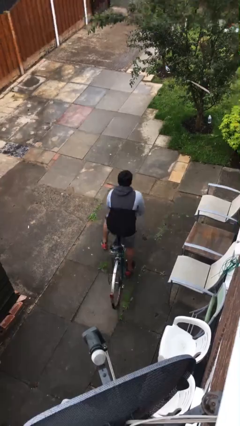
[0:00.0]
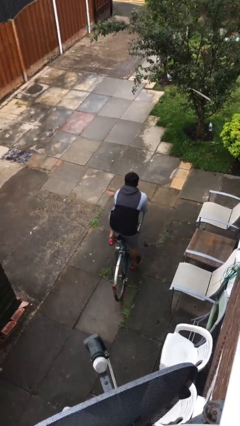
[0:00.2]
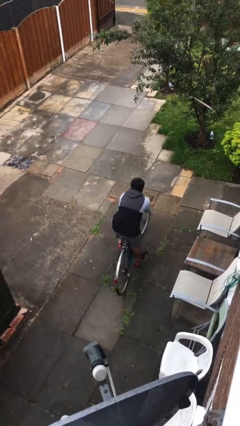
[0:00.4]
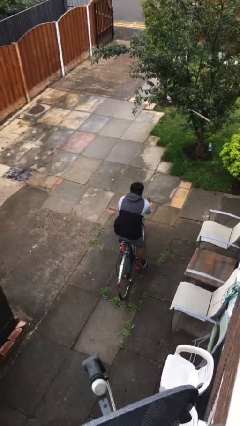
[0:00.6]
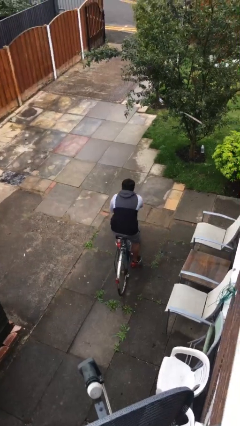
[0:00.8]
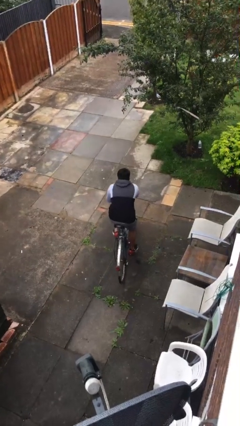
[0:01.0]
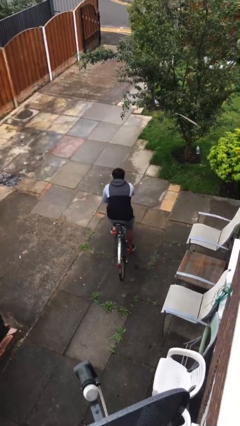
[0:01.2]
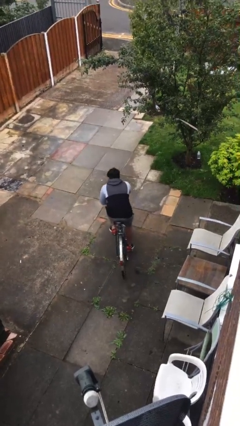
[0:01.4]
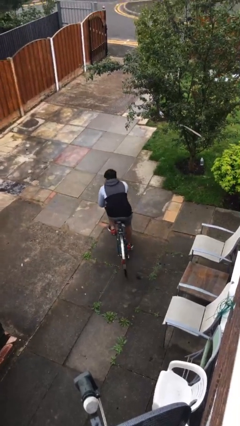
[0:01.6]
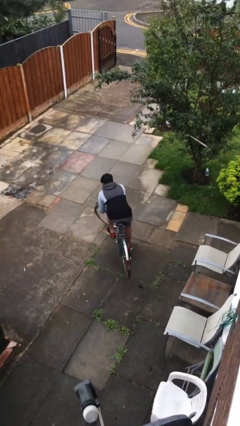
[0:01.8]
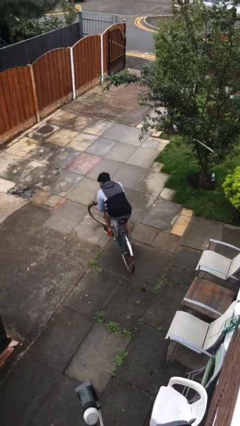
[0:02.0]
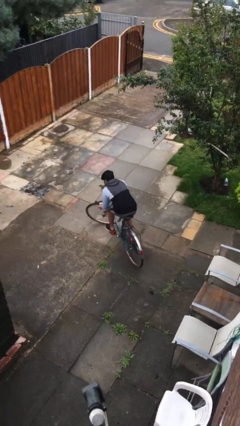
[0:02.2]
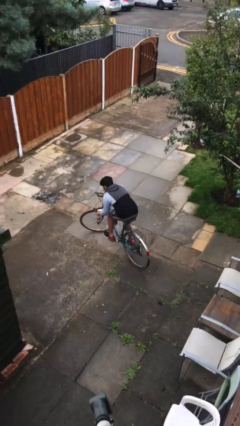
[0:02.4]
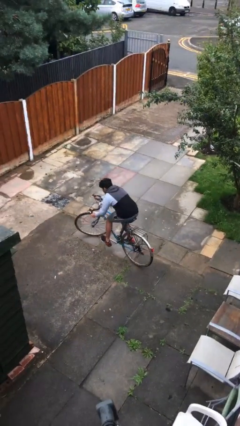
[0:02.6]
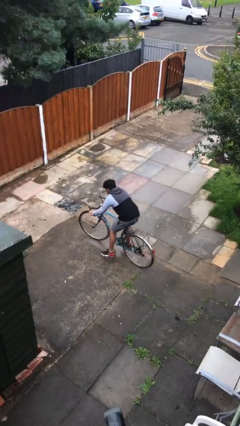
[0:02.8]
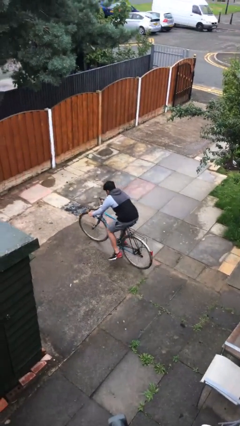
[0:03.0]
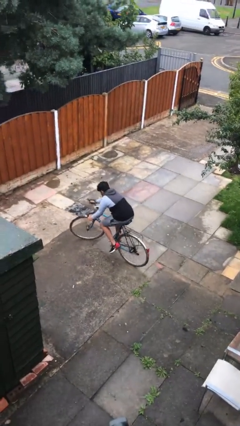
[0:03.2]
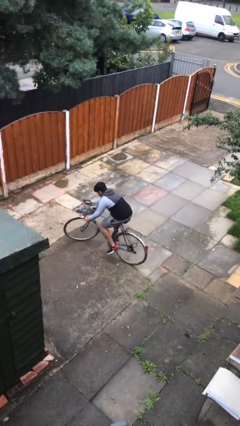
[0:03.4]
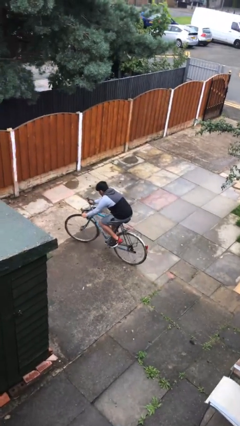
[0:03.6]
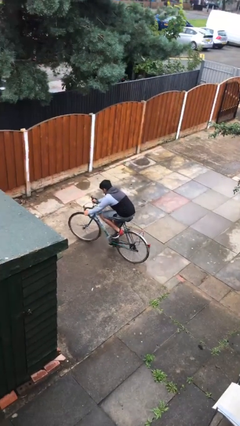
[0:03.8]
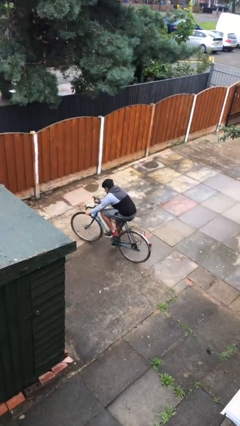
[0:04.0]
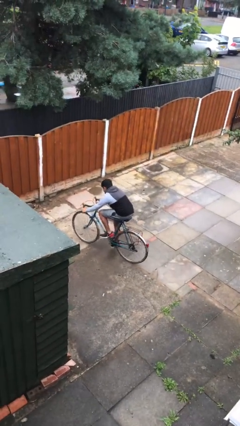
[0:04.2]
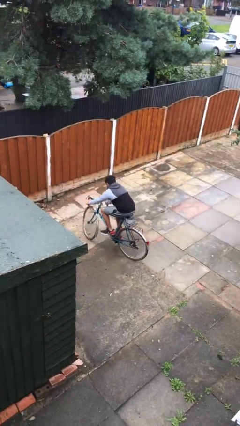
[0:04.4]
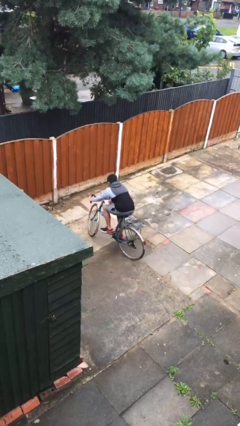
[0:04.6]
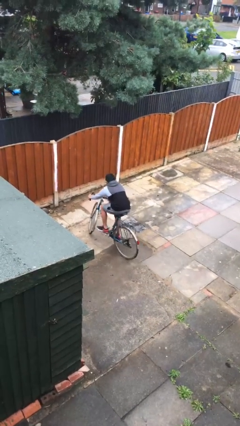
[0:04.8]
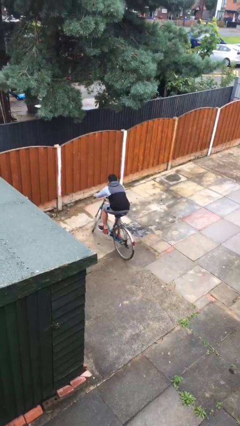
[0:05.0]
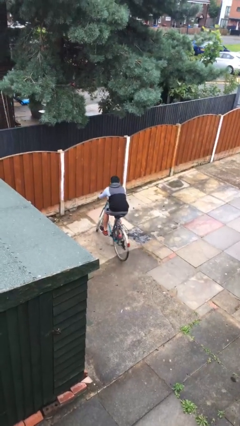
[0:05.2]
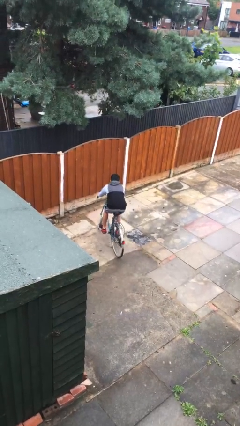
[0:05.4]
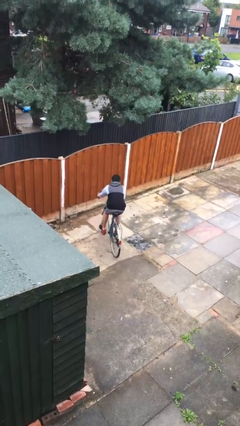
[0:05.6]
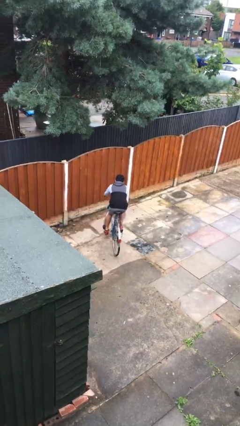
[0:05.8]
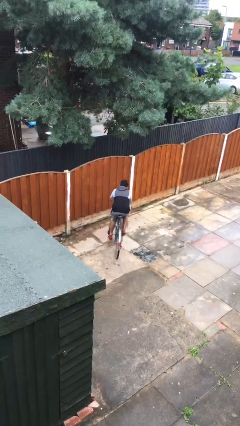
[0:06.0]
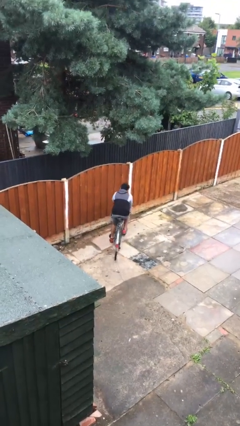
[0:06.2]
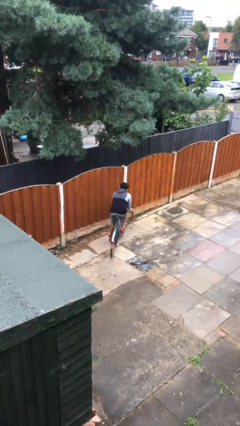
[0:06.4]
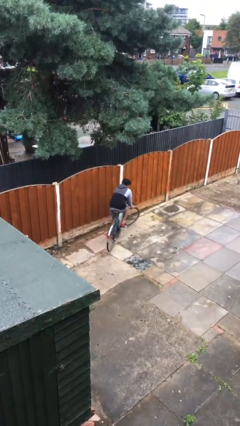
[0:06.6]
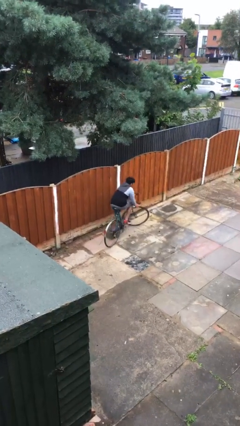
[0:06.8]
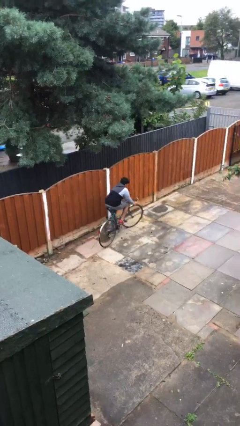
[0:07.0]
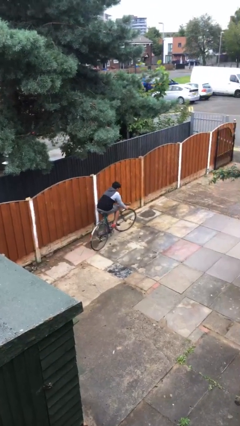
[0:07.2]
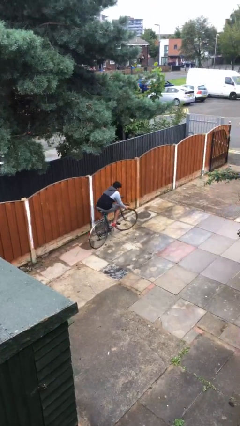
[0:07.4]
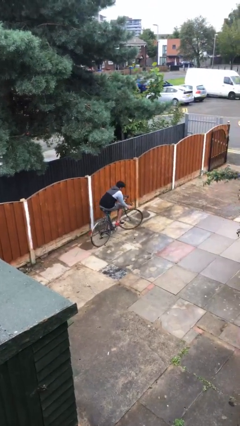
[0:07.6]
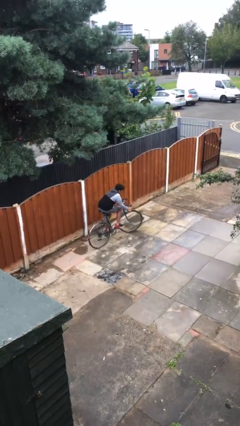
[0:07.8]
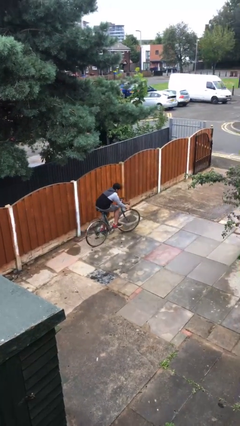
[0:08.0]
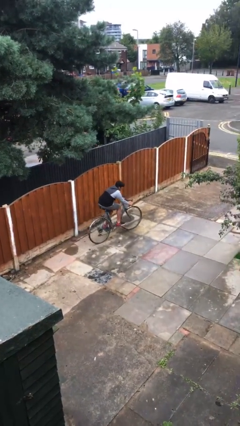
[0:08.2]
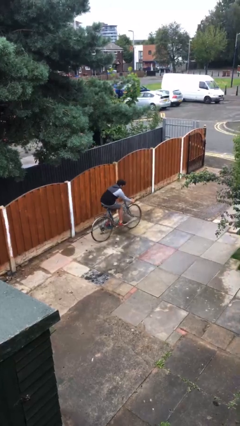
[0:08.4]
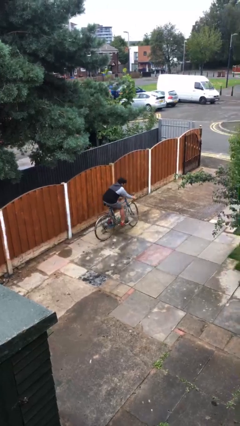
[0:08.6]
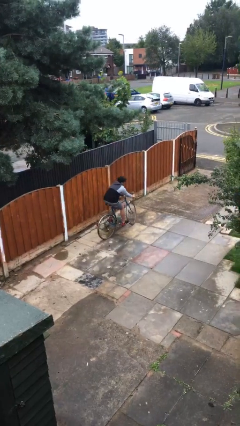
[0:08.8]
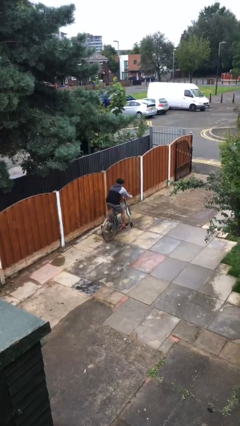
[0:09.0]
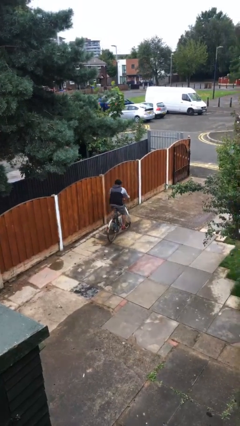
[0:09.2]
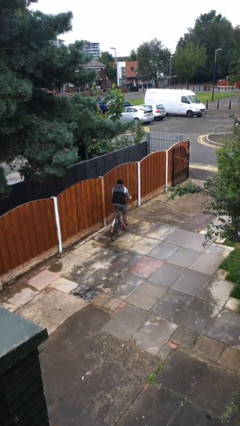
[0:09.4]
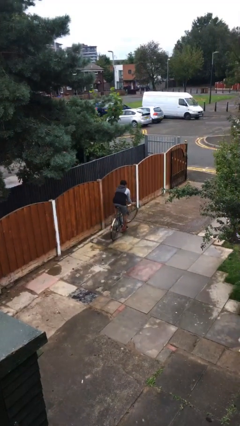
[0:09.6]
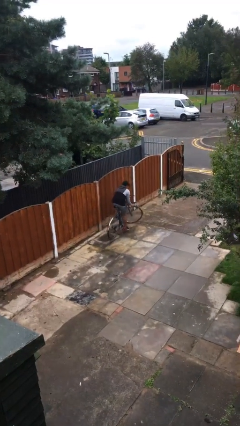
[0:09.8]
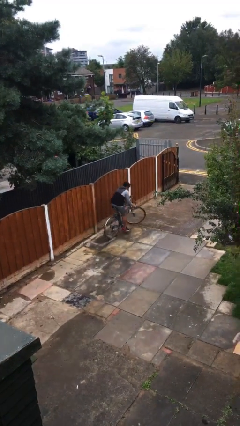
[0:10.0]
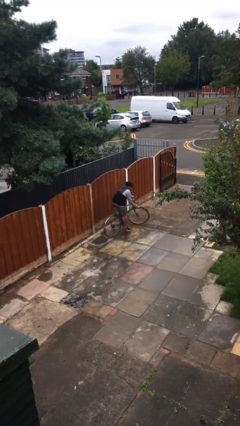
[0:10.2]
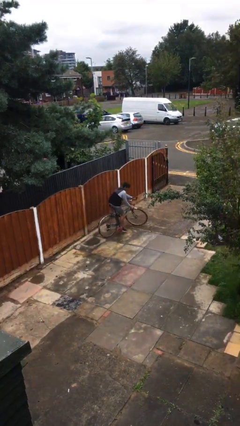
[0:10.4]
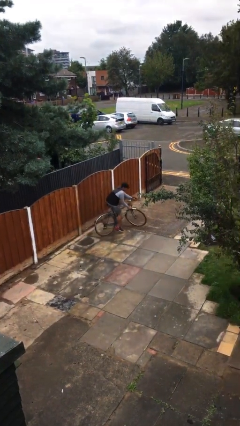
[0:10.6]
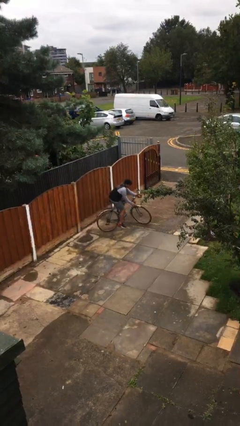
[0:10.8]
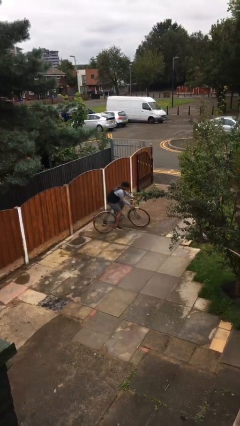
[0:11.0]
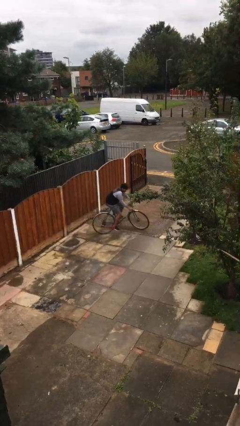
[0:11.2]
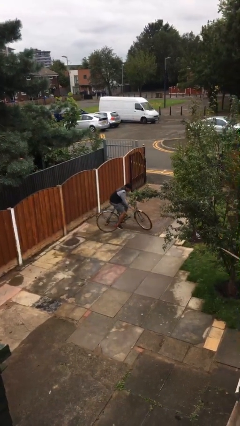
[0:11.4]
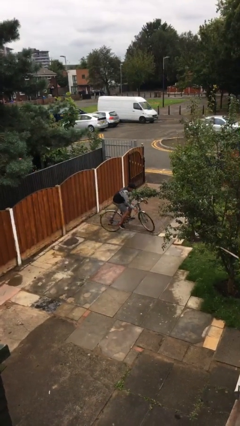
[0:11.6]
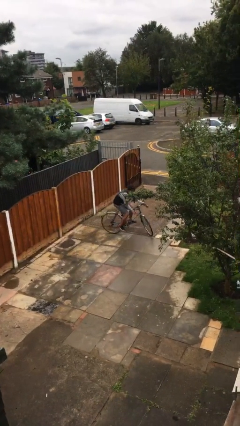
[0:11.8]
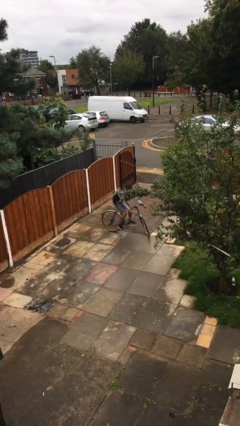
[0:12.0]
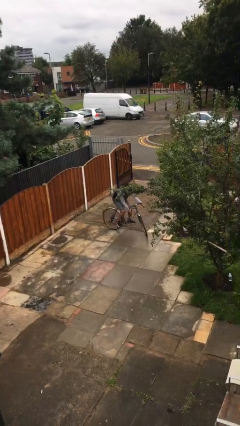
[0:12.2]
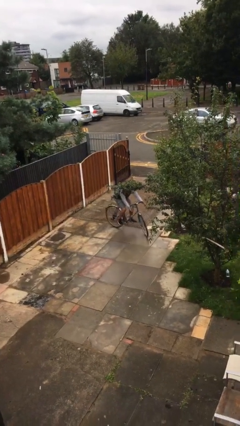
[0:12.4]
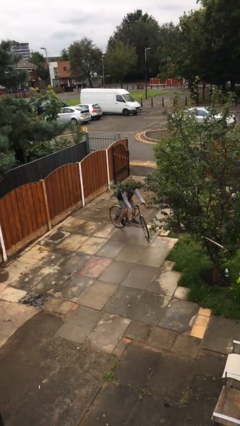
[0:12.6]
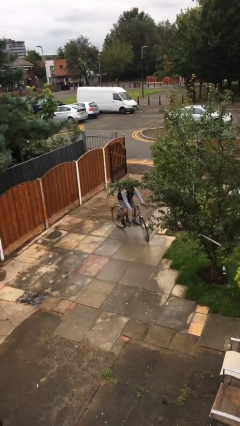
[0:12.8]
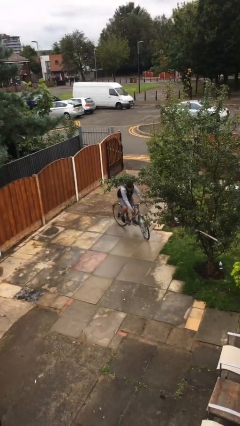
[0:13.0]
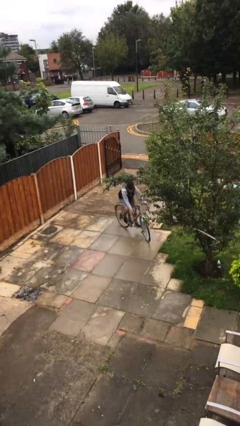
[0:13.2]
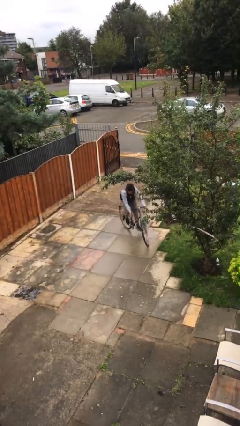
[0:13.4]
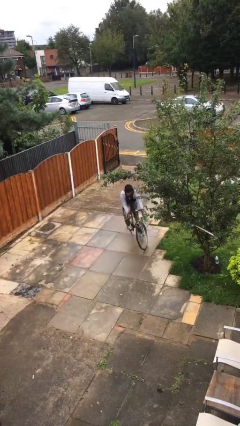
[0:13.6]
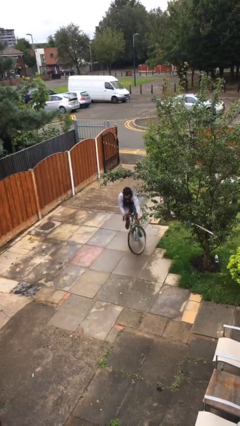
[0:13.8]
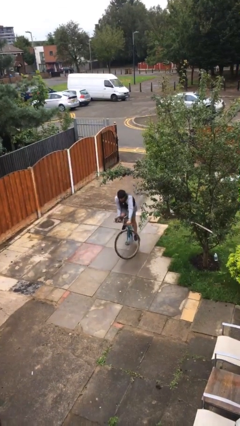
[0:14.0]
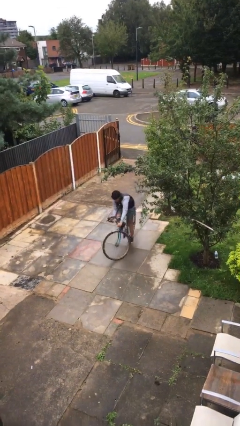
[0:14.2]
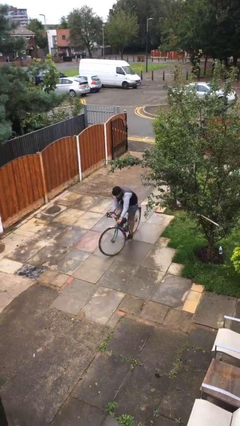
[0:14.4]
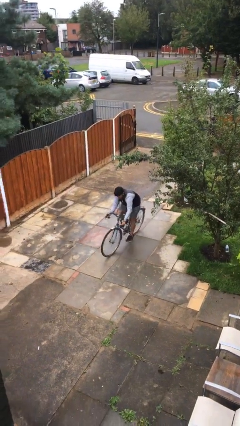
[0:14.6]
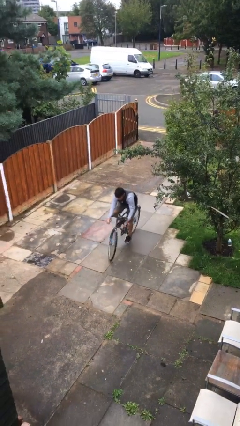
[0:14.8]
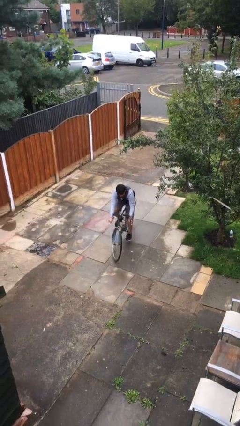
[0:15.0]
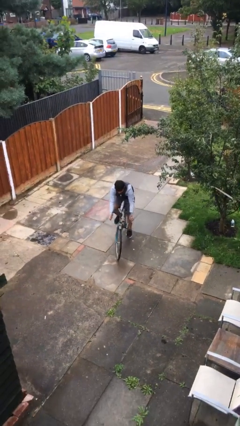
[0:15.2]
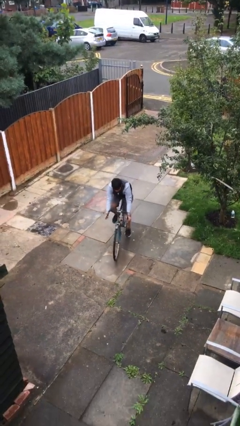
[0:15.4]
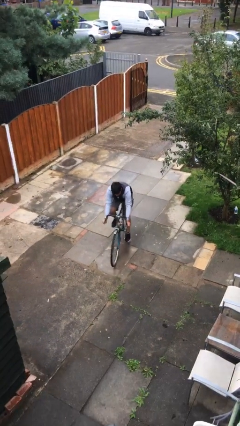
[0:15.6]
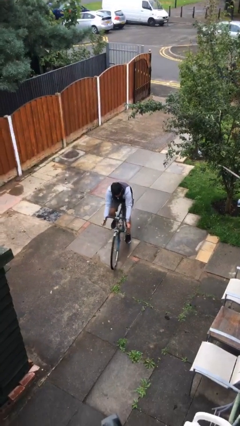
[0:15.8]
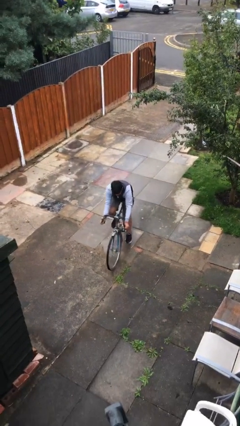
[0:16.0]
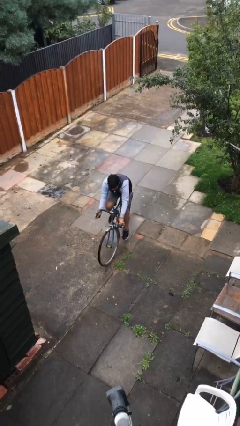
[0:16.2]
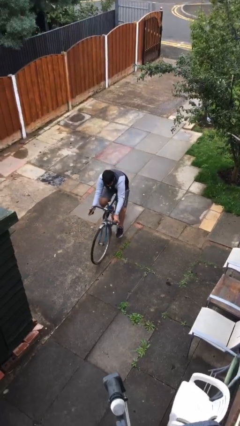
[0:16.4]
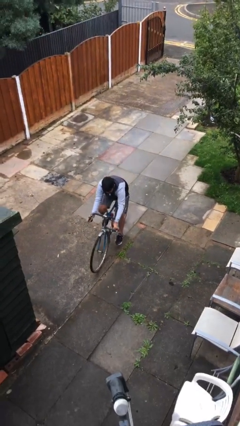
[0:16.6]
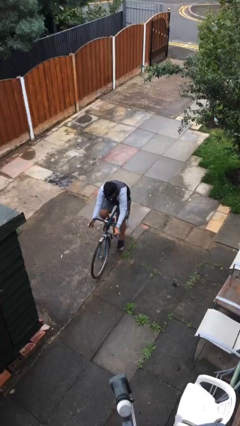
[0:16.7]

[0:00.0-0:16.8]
person rides bicycle

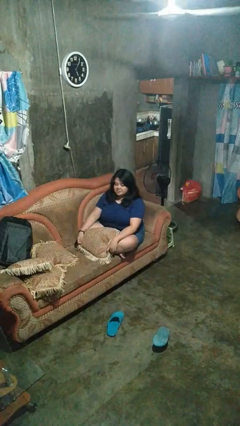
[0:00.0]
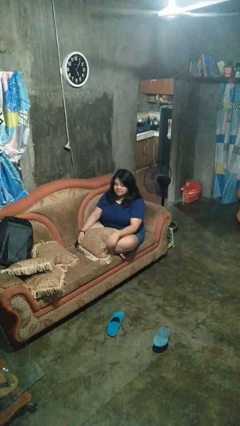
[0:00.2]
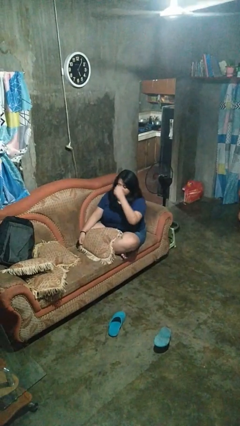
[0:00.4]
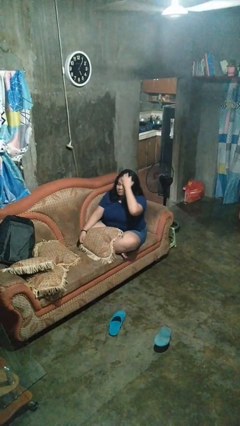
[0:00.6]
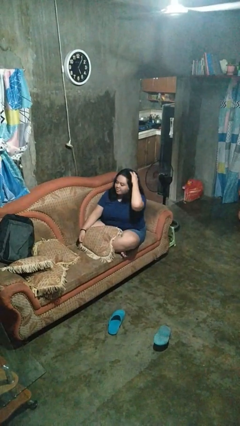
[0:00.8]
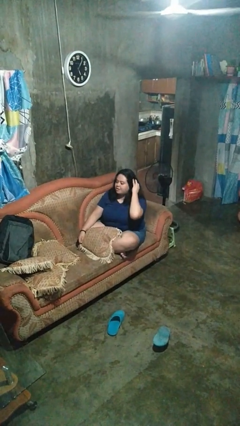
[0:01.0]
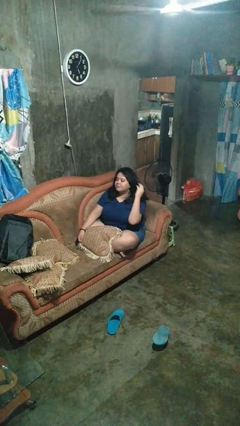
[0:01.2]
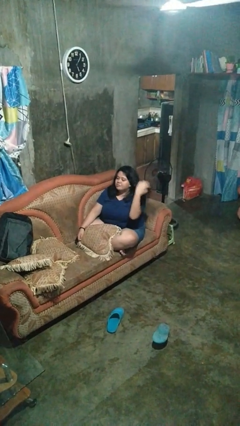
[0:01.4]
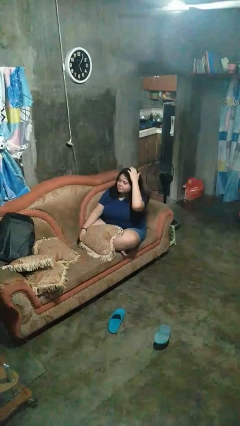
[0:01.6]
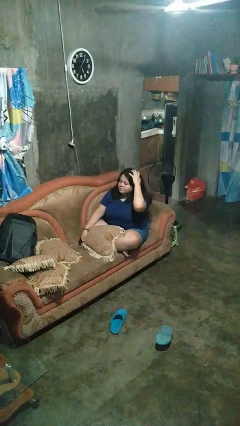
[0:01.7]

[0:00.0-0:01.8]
person strokes hair
